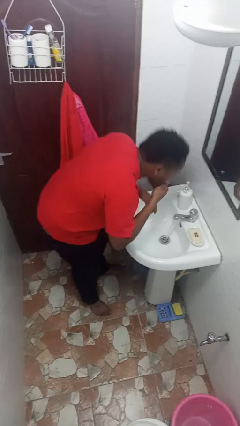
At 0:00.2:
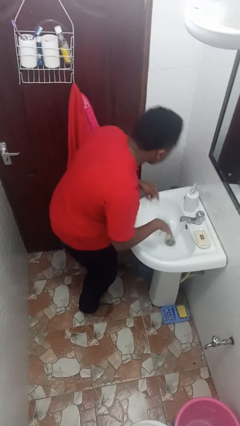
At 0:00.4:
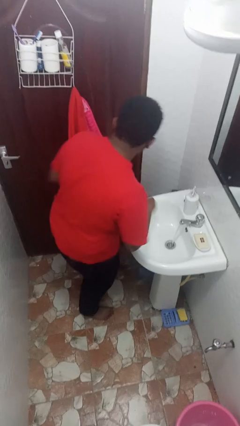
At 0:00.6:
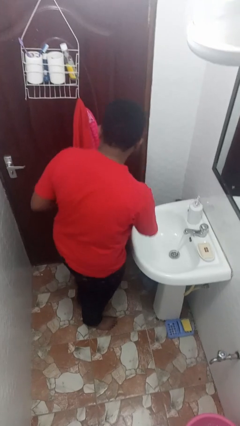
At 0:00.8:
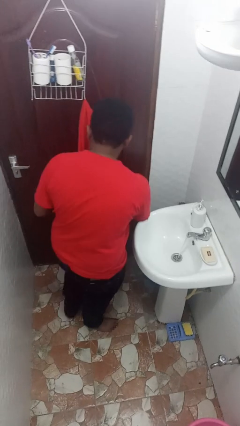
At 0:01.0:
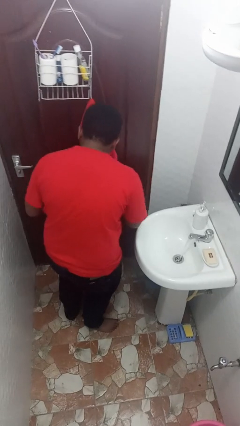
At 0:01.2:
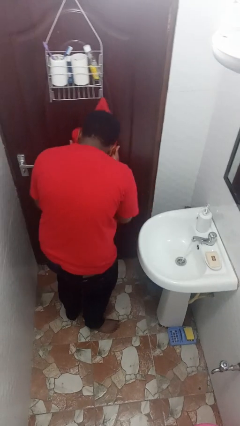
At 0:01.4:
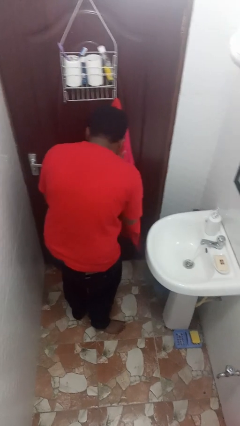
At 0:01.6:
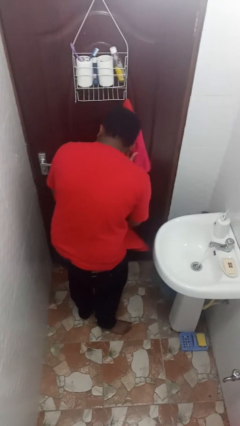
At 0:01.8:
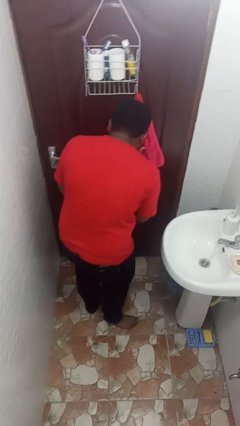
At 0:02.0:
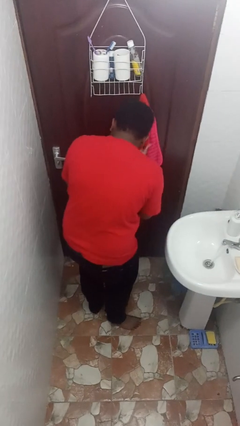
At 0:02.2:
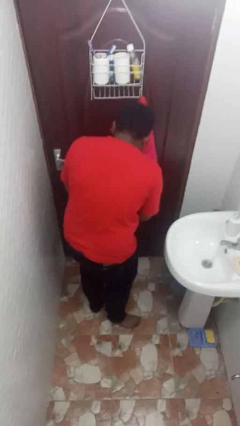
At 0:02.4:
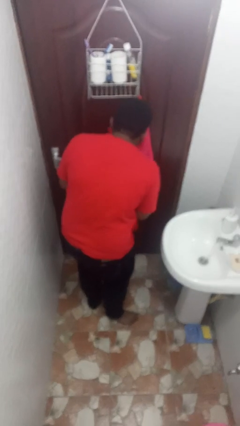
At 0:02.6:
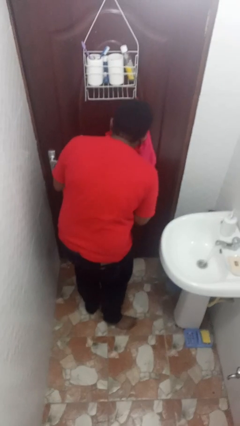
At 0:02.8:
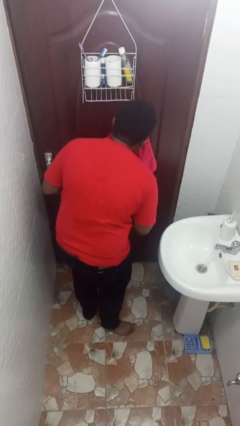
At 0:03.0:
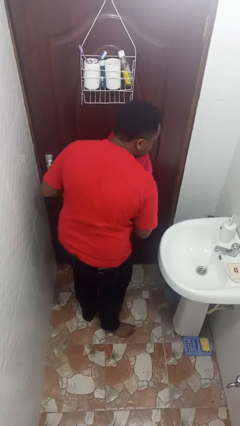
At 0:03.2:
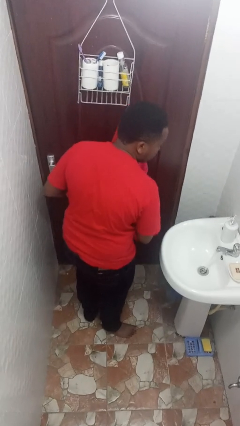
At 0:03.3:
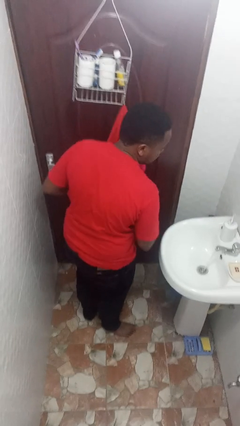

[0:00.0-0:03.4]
person dries face with towel

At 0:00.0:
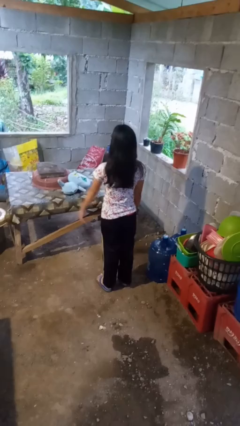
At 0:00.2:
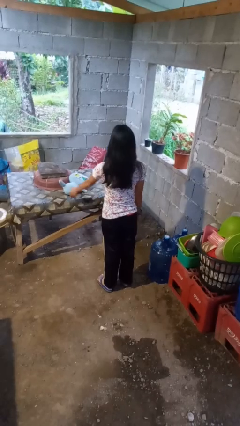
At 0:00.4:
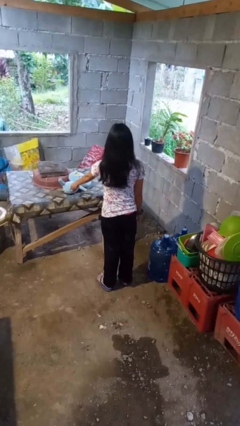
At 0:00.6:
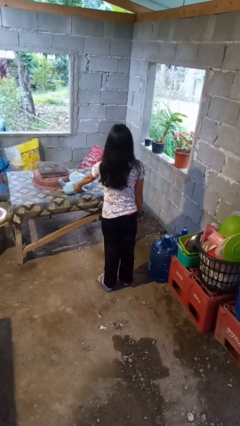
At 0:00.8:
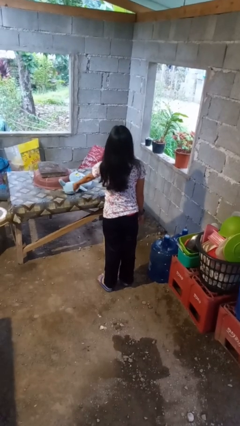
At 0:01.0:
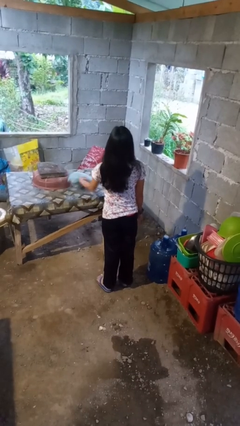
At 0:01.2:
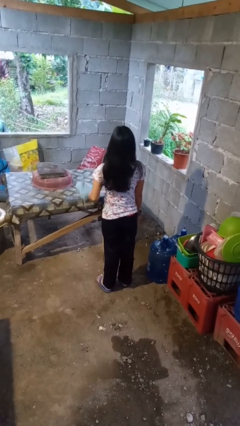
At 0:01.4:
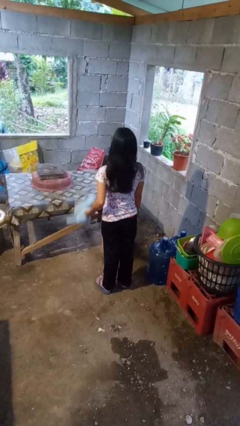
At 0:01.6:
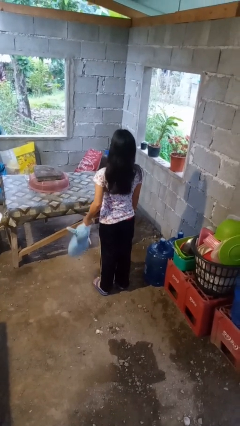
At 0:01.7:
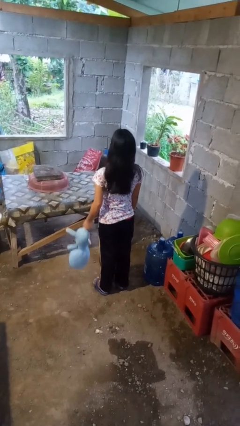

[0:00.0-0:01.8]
person picks up object from table

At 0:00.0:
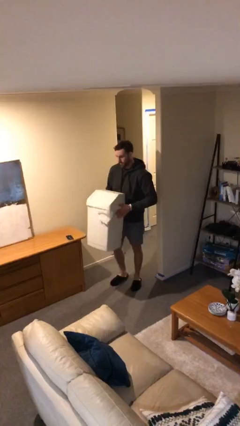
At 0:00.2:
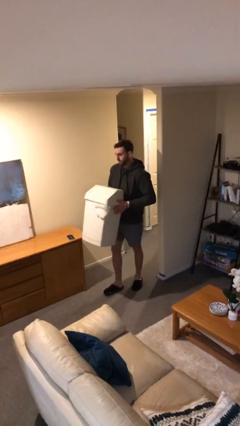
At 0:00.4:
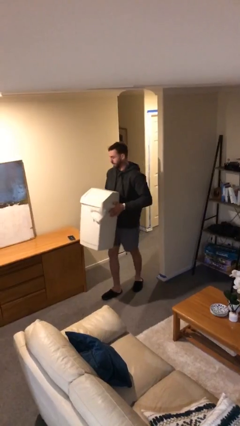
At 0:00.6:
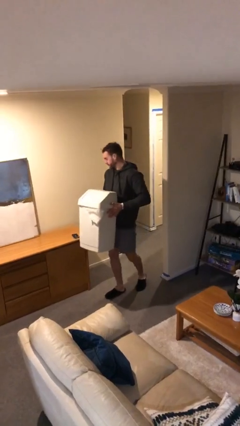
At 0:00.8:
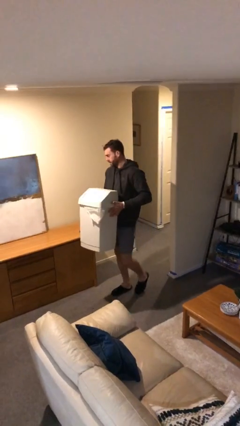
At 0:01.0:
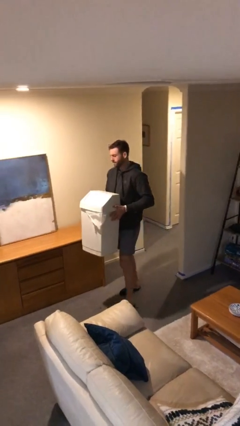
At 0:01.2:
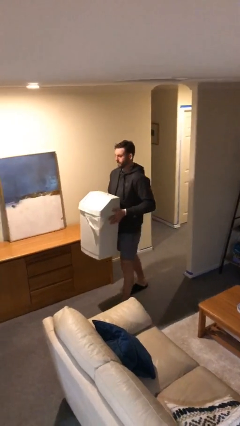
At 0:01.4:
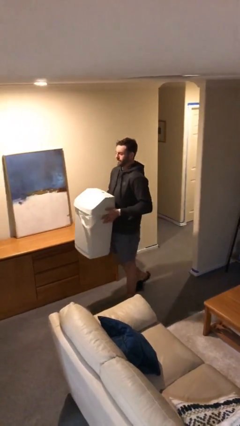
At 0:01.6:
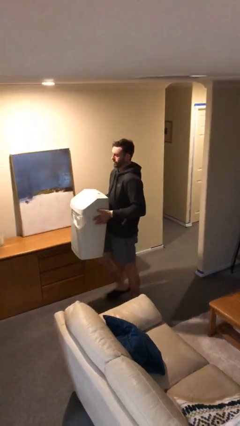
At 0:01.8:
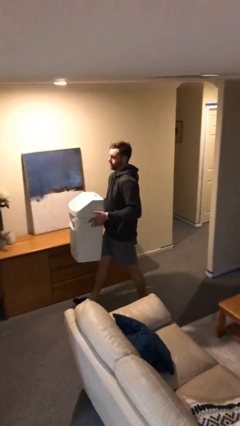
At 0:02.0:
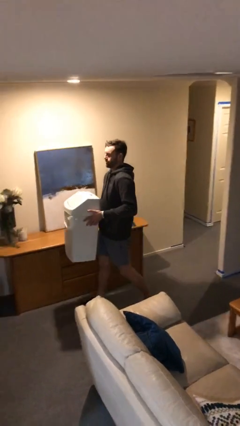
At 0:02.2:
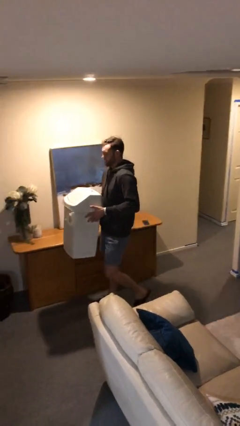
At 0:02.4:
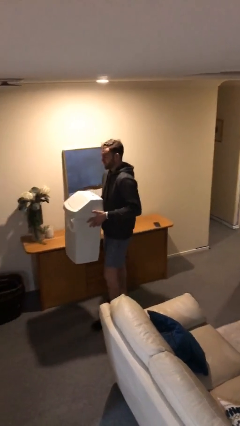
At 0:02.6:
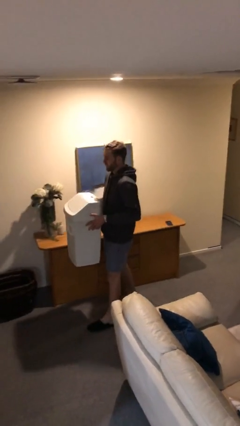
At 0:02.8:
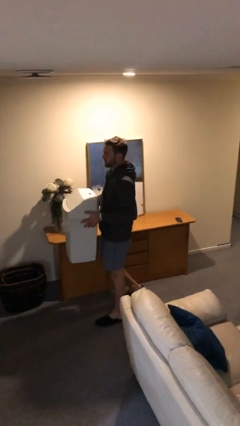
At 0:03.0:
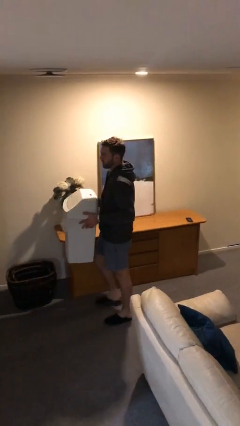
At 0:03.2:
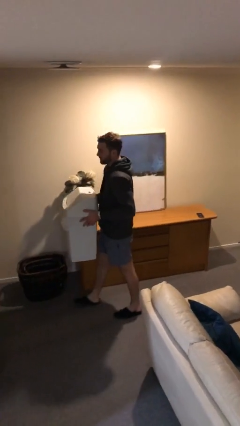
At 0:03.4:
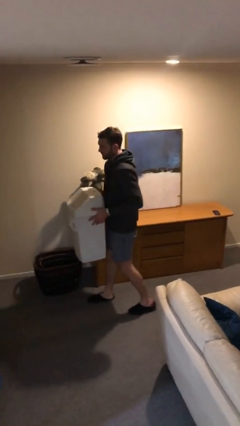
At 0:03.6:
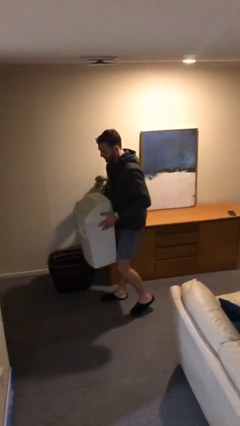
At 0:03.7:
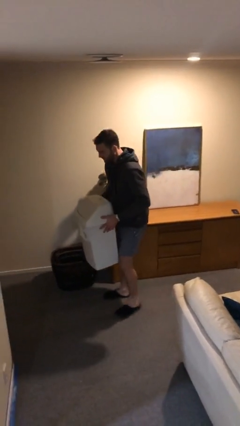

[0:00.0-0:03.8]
person carries heavy object

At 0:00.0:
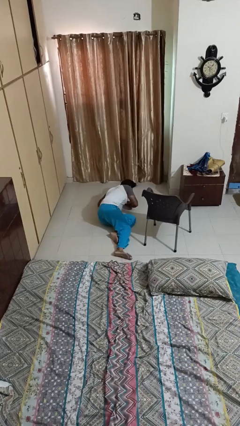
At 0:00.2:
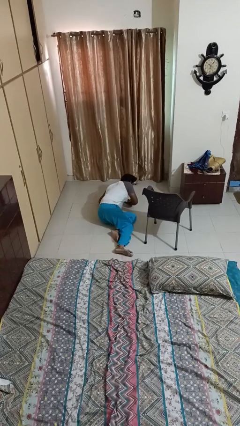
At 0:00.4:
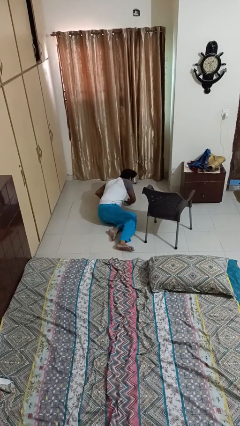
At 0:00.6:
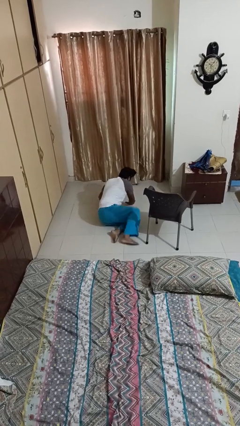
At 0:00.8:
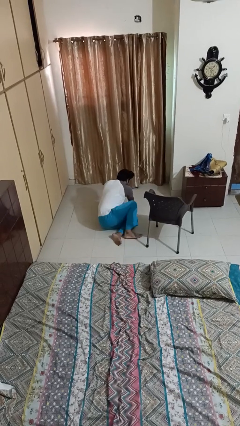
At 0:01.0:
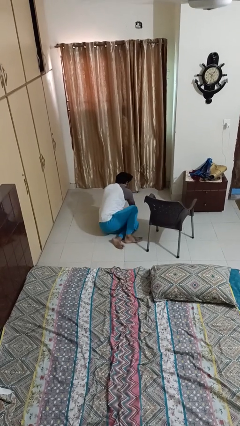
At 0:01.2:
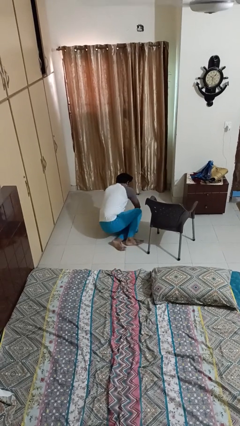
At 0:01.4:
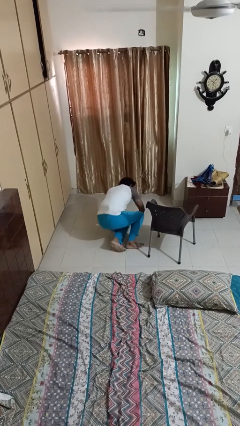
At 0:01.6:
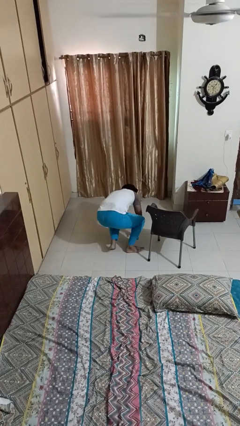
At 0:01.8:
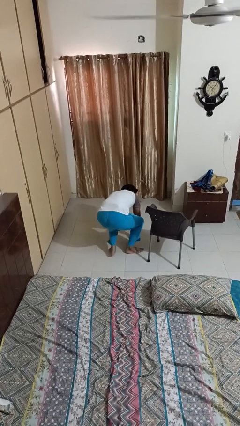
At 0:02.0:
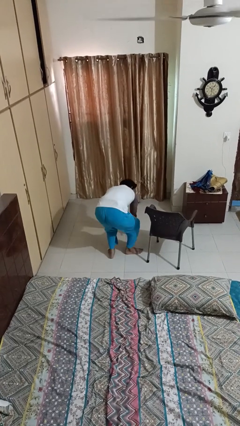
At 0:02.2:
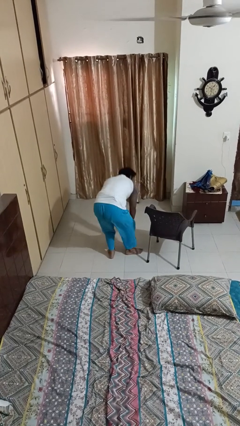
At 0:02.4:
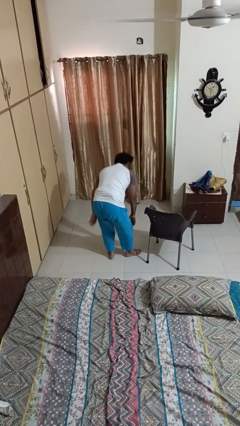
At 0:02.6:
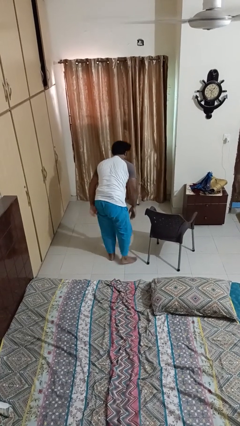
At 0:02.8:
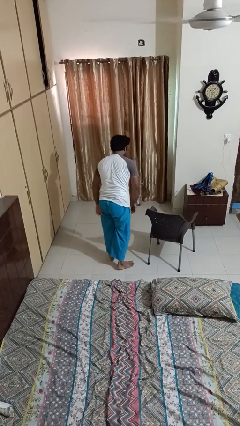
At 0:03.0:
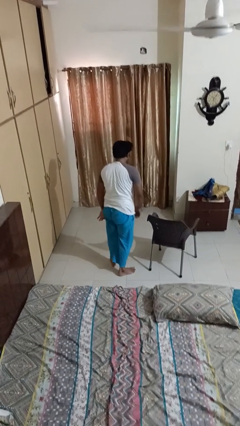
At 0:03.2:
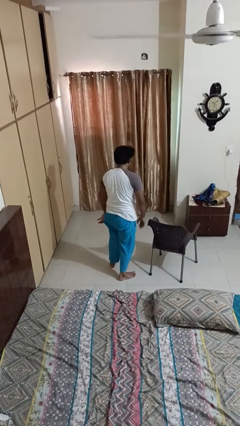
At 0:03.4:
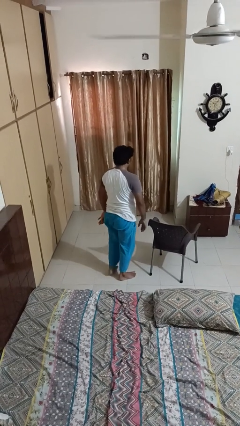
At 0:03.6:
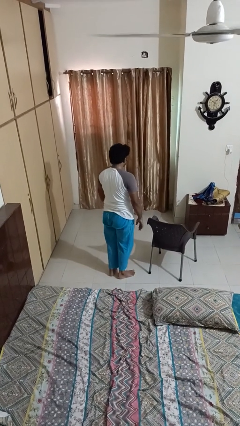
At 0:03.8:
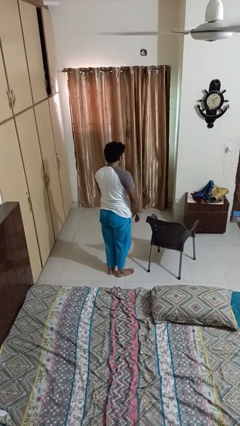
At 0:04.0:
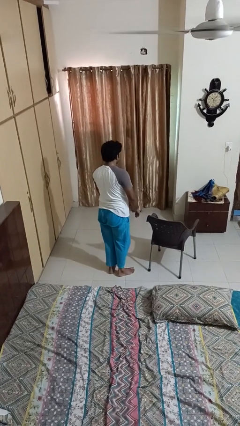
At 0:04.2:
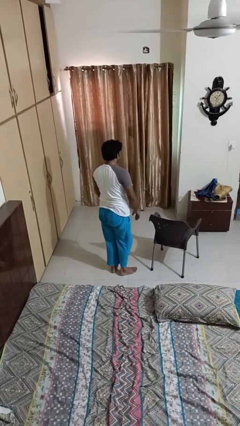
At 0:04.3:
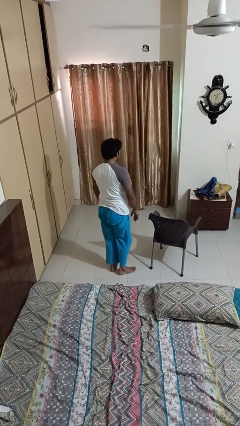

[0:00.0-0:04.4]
person stands up from floor

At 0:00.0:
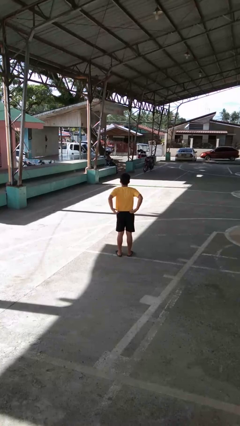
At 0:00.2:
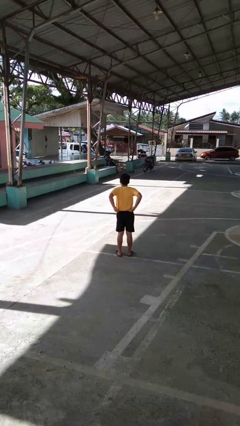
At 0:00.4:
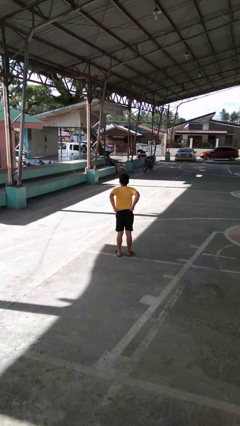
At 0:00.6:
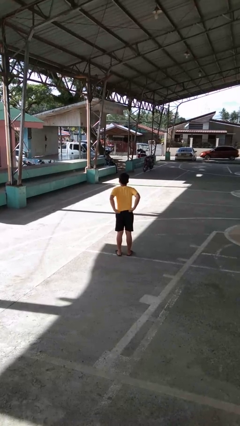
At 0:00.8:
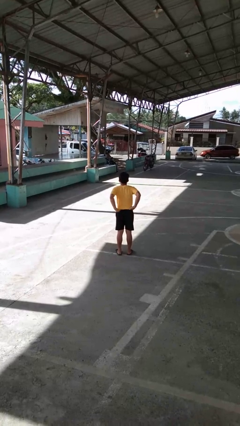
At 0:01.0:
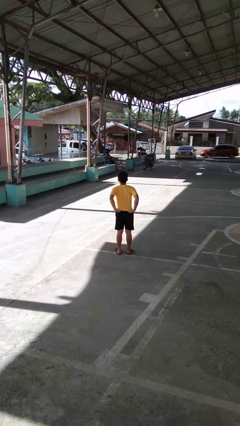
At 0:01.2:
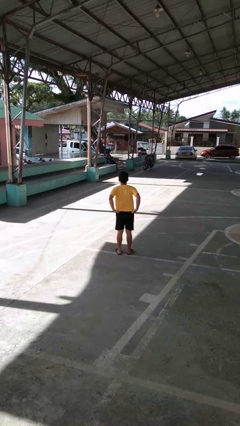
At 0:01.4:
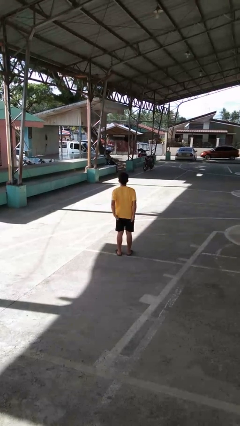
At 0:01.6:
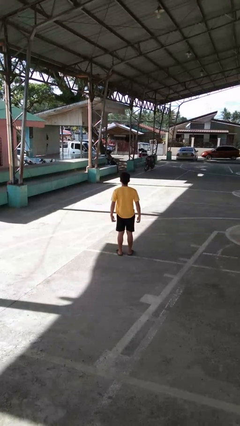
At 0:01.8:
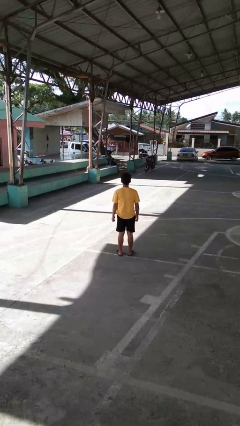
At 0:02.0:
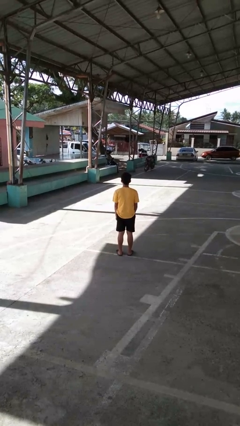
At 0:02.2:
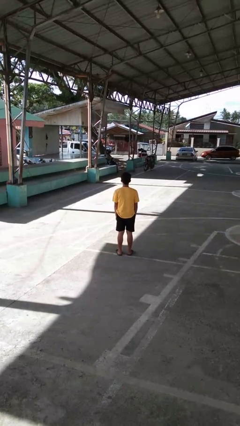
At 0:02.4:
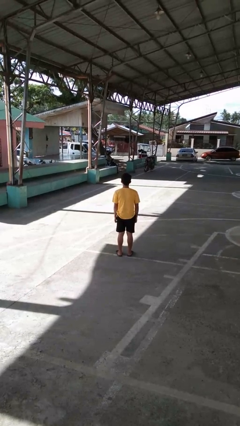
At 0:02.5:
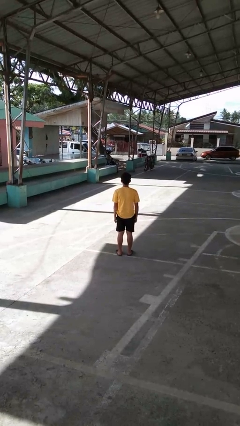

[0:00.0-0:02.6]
person untucks shirt

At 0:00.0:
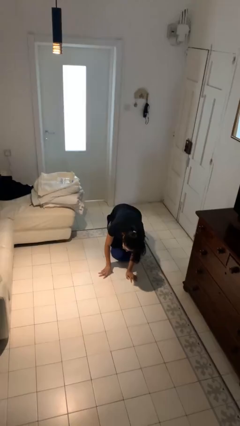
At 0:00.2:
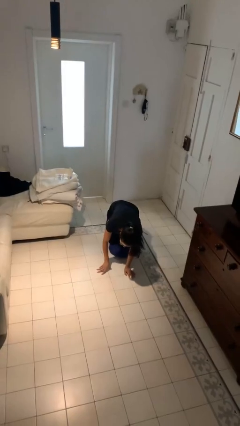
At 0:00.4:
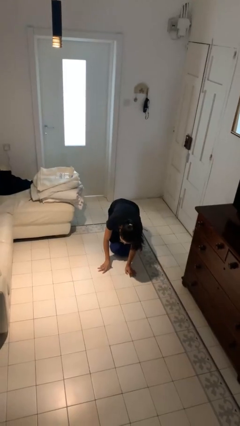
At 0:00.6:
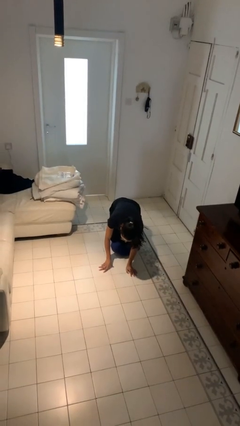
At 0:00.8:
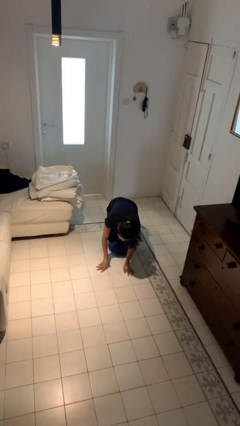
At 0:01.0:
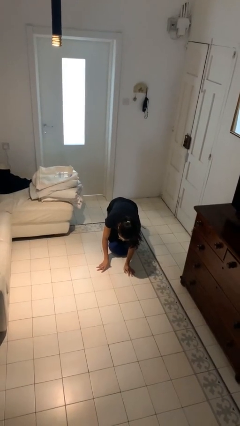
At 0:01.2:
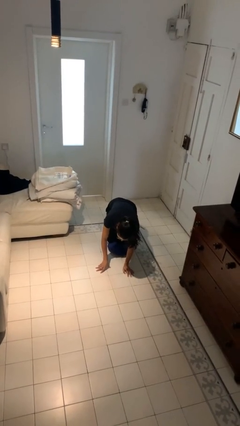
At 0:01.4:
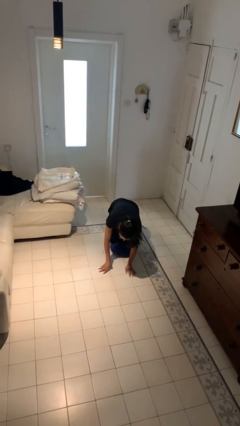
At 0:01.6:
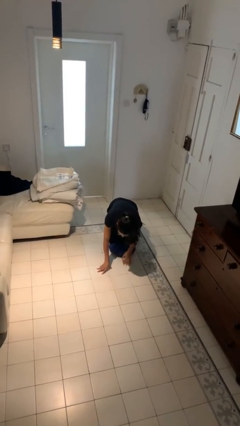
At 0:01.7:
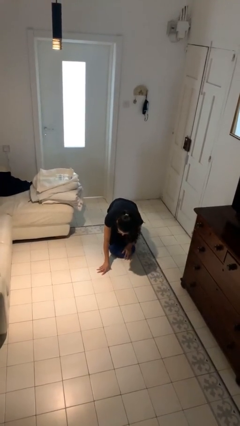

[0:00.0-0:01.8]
person lies down on floor
